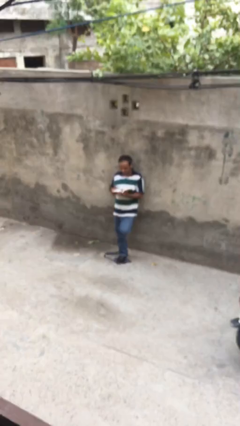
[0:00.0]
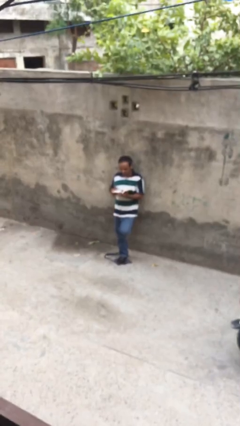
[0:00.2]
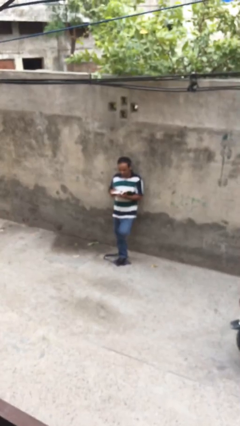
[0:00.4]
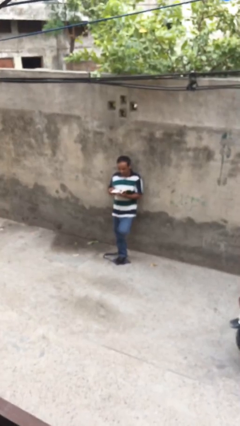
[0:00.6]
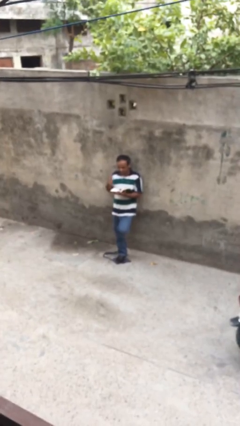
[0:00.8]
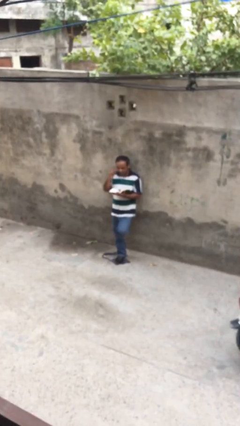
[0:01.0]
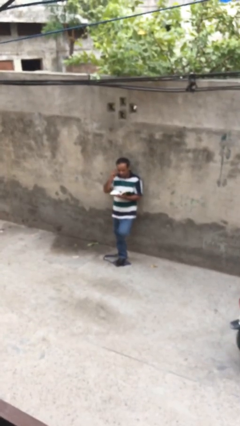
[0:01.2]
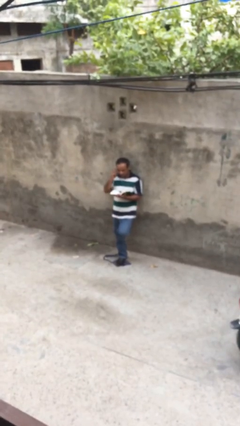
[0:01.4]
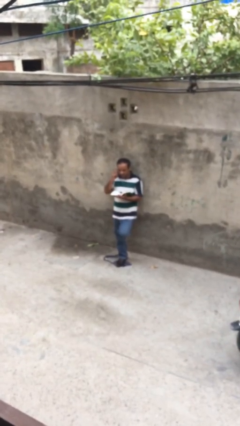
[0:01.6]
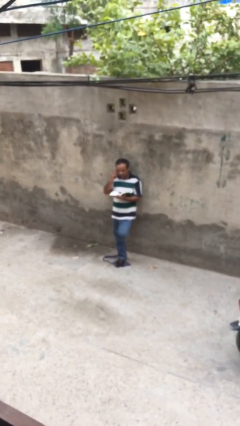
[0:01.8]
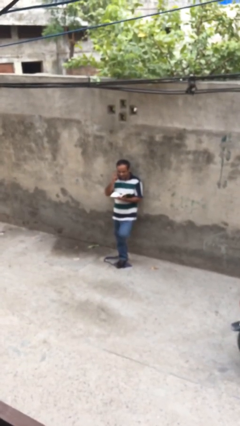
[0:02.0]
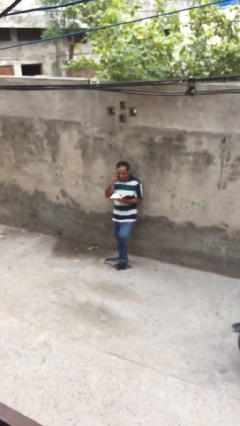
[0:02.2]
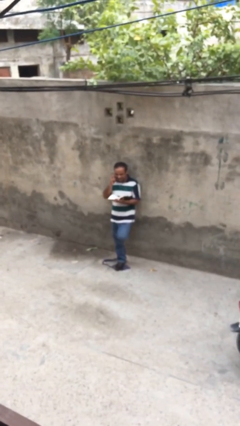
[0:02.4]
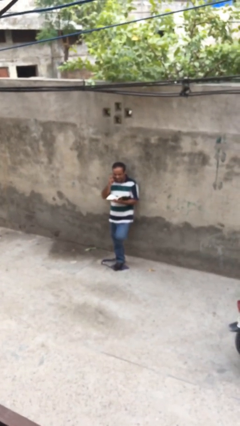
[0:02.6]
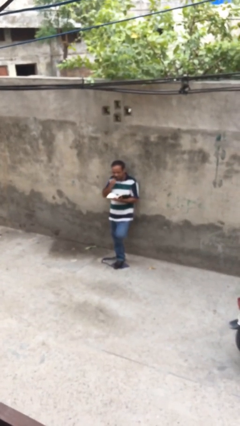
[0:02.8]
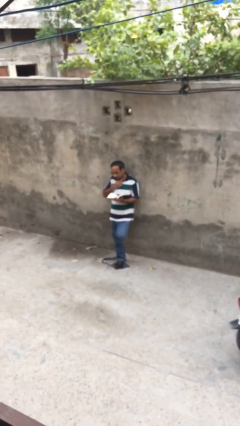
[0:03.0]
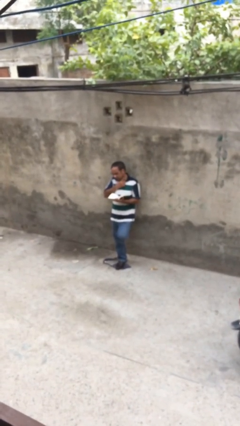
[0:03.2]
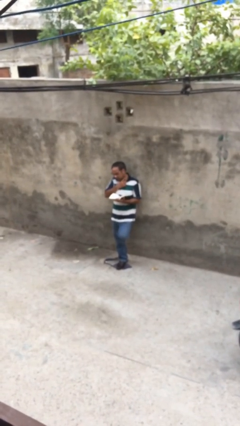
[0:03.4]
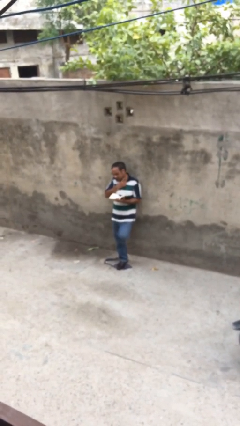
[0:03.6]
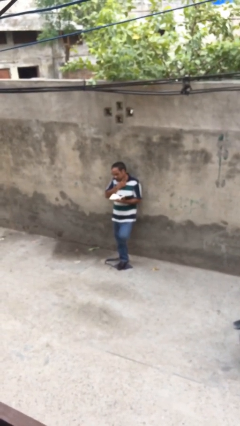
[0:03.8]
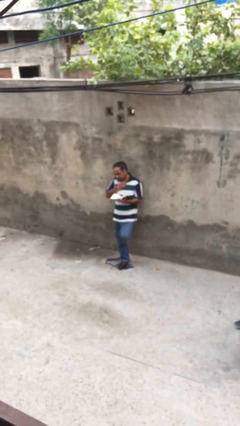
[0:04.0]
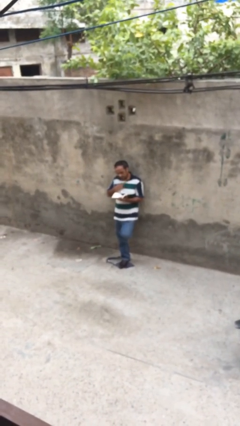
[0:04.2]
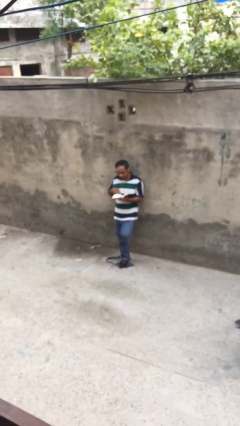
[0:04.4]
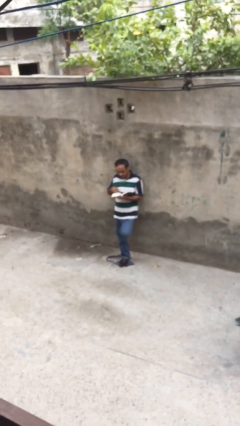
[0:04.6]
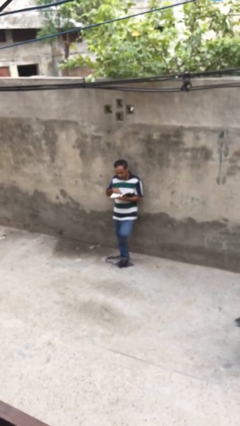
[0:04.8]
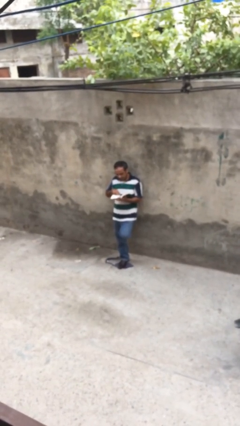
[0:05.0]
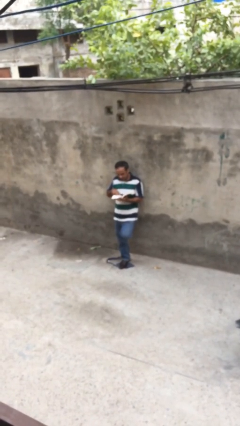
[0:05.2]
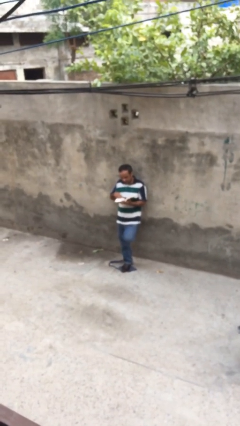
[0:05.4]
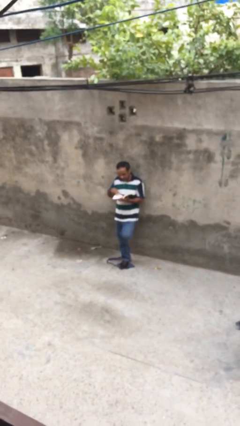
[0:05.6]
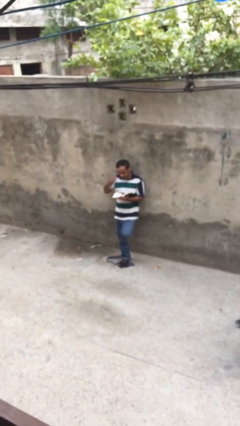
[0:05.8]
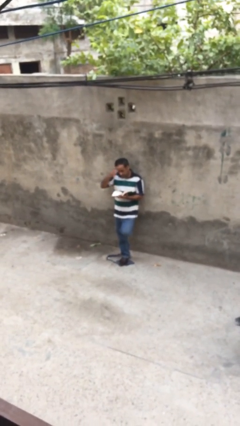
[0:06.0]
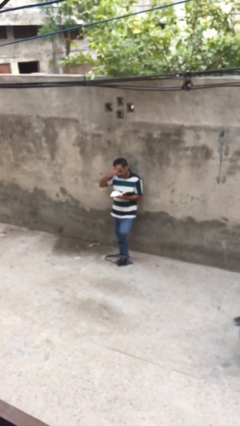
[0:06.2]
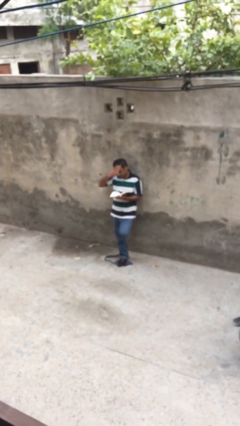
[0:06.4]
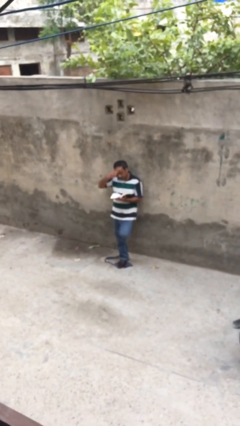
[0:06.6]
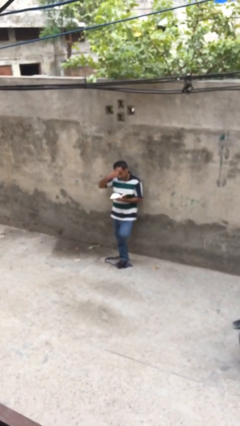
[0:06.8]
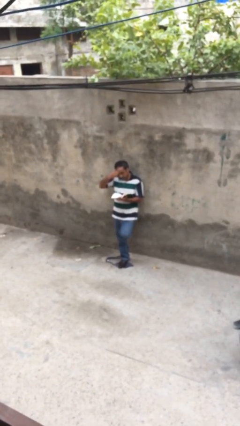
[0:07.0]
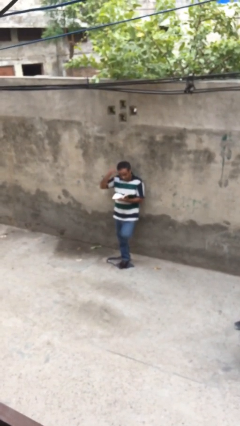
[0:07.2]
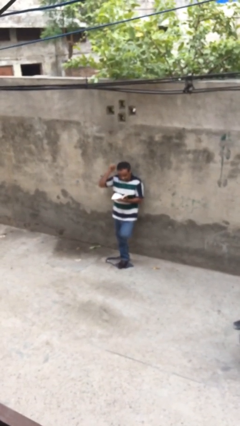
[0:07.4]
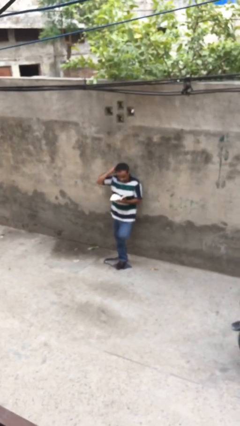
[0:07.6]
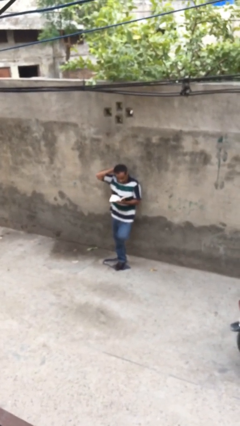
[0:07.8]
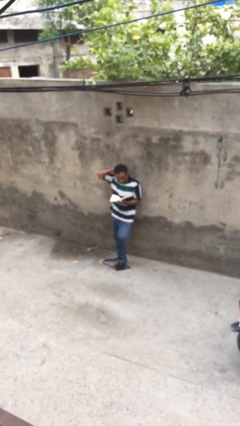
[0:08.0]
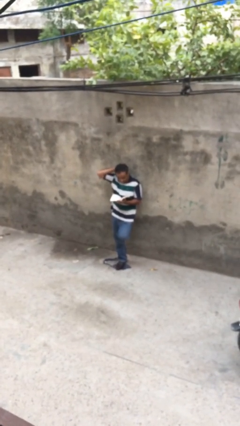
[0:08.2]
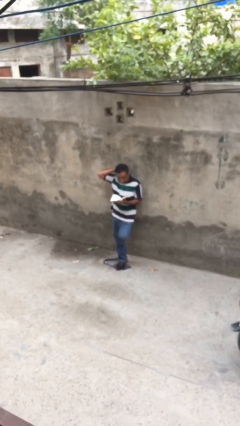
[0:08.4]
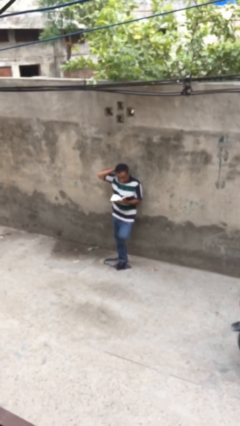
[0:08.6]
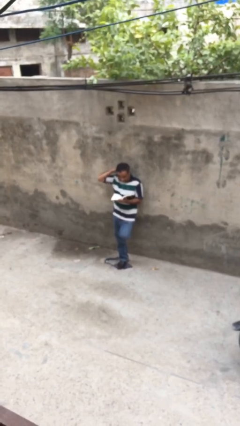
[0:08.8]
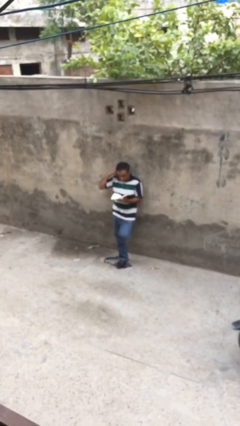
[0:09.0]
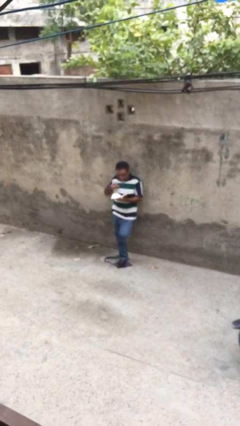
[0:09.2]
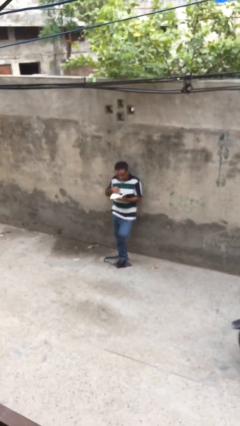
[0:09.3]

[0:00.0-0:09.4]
person reads document

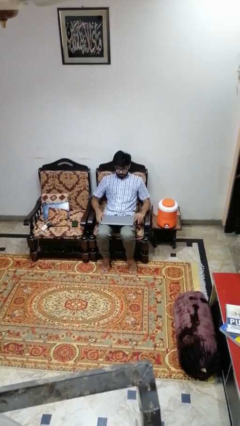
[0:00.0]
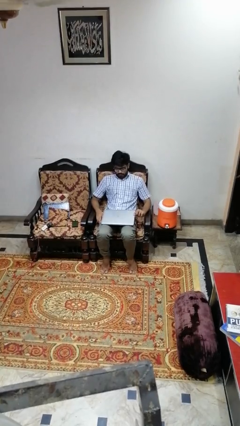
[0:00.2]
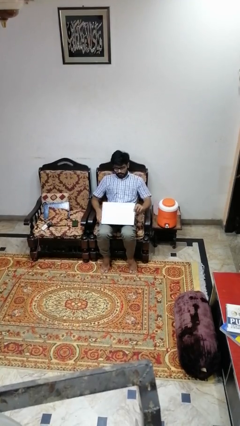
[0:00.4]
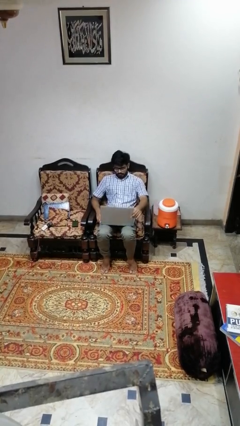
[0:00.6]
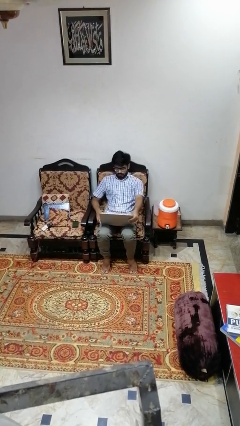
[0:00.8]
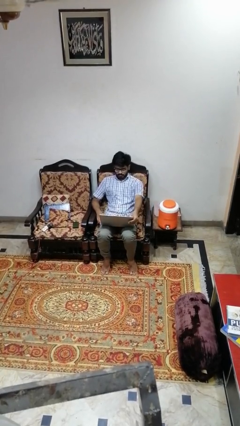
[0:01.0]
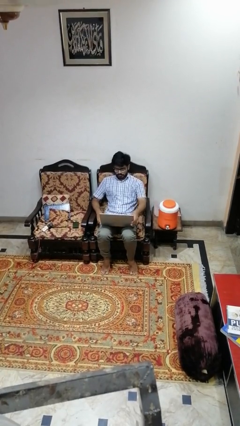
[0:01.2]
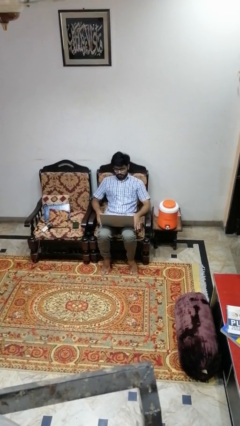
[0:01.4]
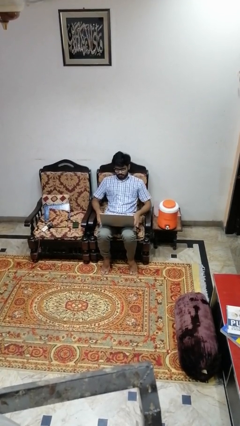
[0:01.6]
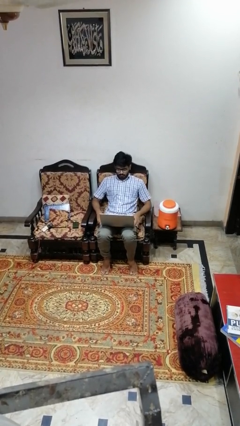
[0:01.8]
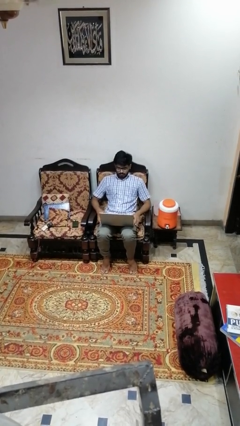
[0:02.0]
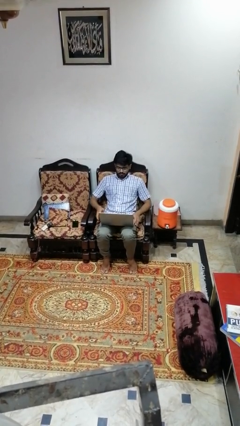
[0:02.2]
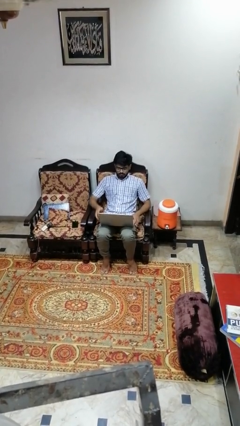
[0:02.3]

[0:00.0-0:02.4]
person opens laptop

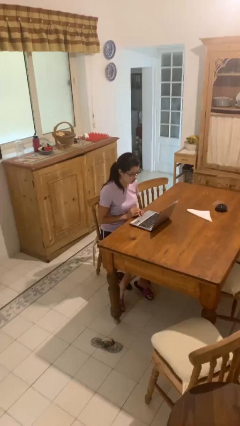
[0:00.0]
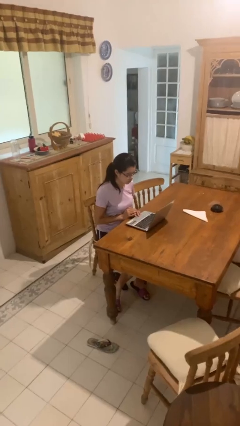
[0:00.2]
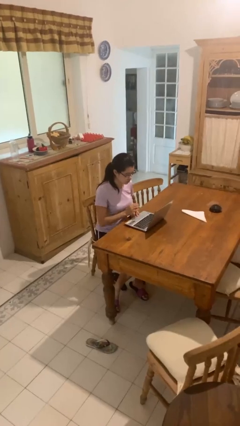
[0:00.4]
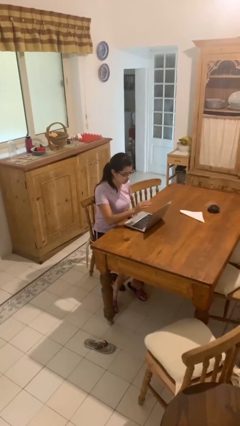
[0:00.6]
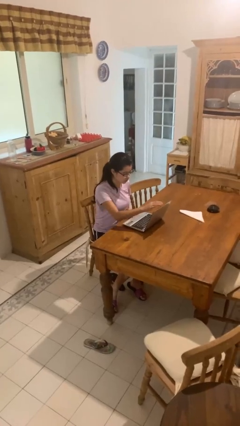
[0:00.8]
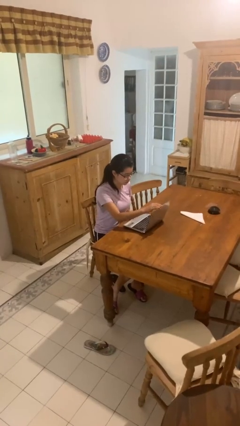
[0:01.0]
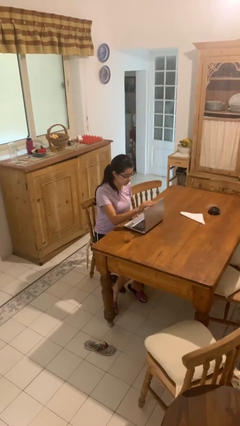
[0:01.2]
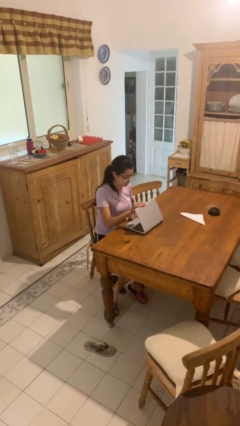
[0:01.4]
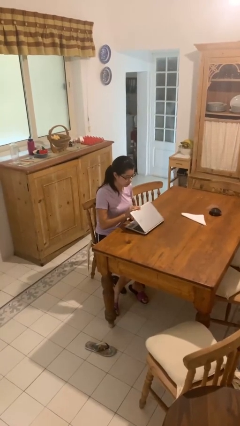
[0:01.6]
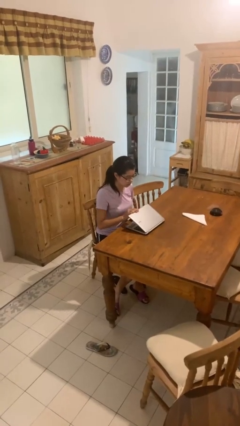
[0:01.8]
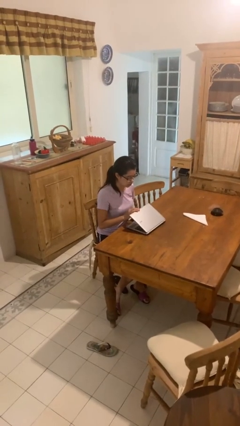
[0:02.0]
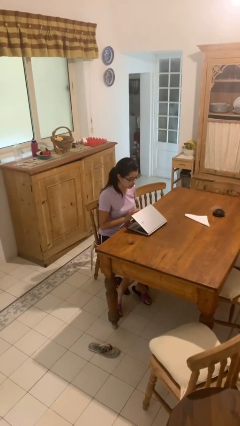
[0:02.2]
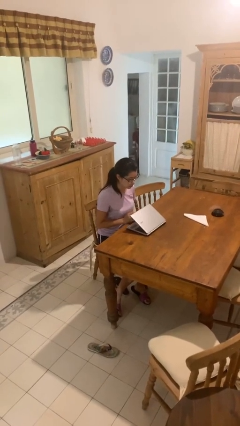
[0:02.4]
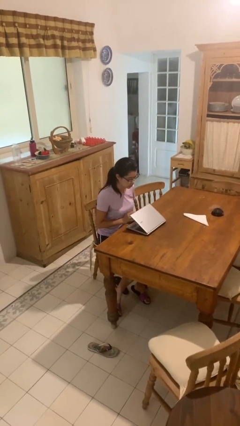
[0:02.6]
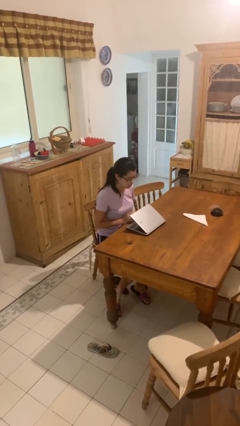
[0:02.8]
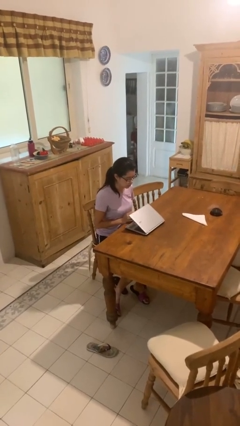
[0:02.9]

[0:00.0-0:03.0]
person closes laptop

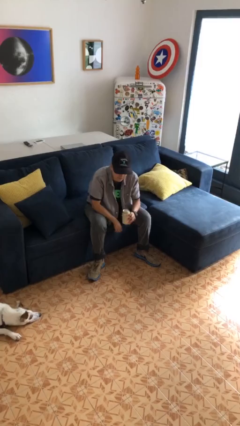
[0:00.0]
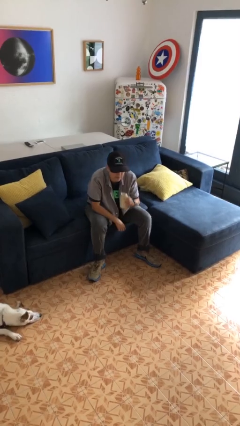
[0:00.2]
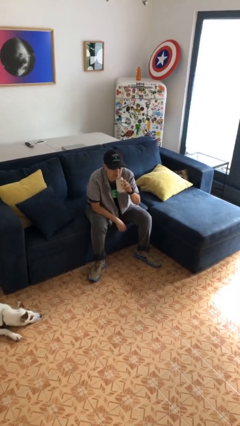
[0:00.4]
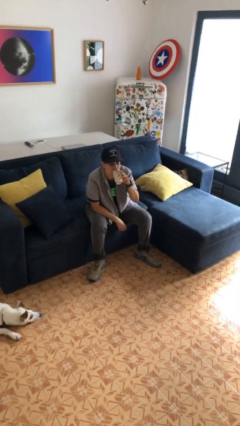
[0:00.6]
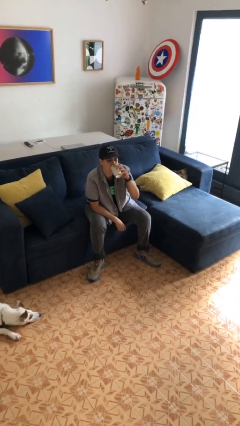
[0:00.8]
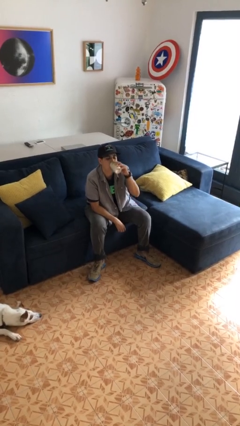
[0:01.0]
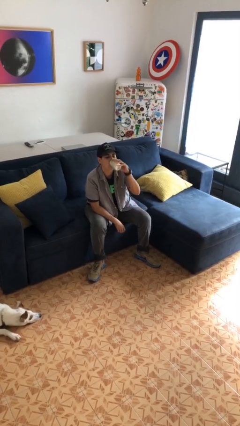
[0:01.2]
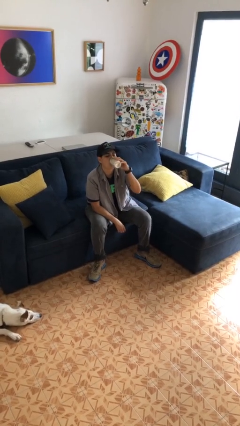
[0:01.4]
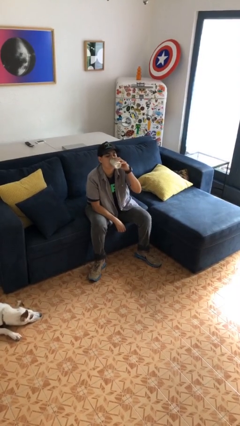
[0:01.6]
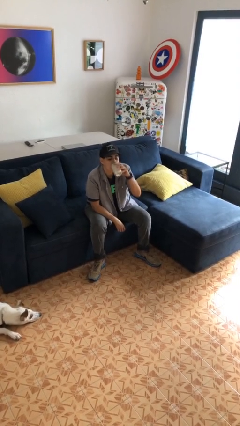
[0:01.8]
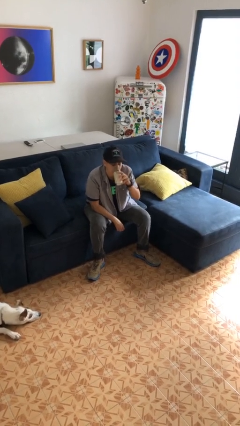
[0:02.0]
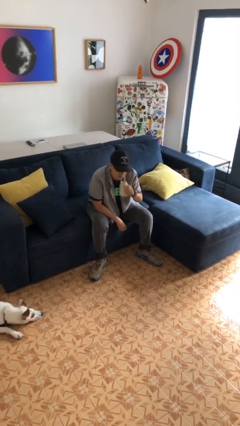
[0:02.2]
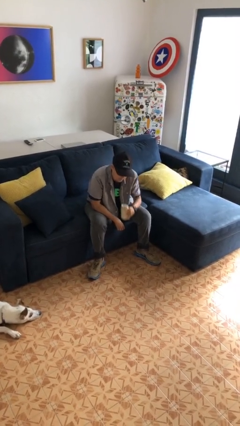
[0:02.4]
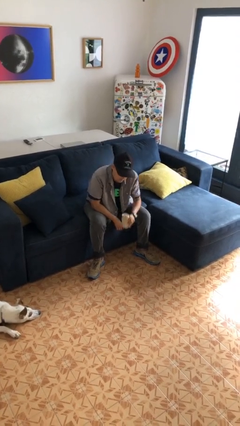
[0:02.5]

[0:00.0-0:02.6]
person drinks from beverage can

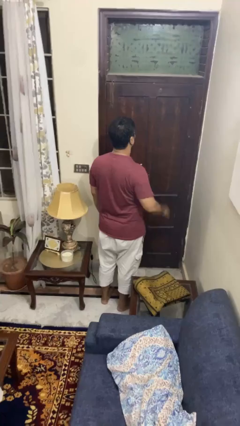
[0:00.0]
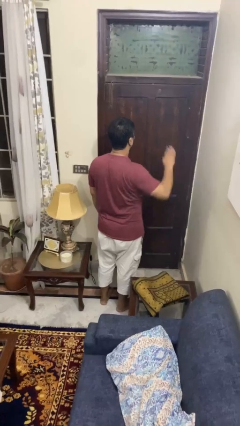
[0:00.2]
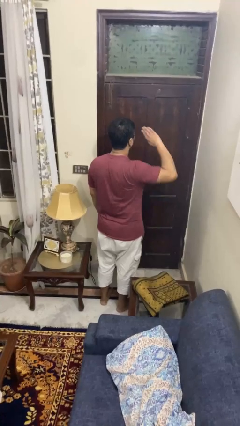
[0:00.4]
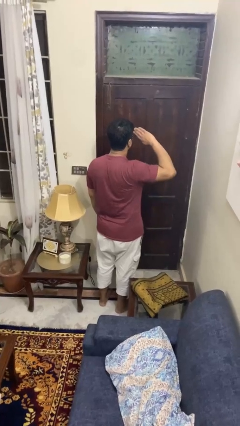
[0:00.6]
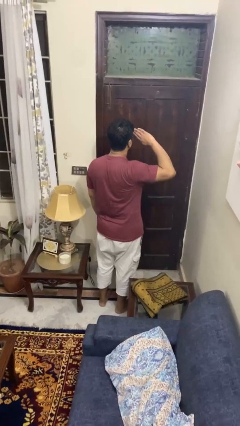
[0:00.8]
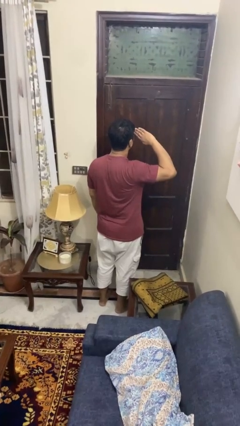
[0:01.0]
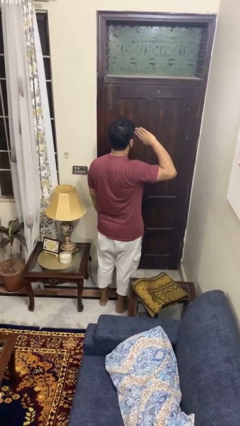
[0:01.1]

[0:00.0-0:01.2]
person salutes
